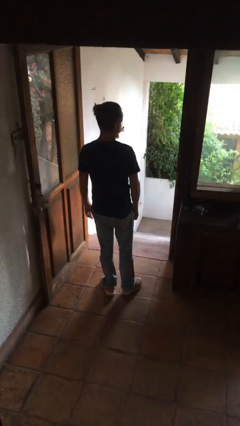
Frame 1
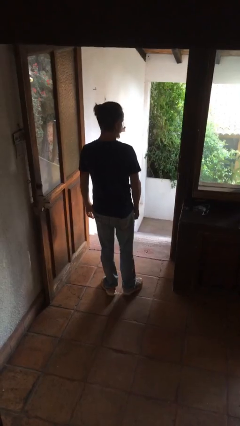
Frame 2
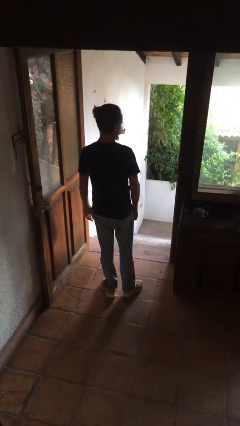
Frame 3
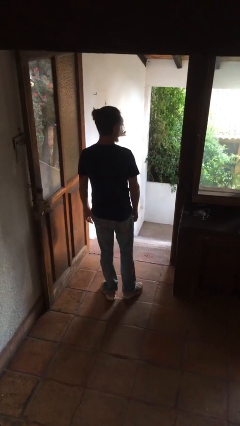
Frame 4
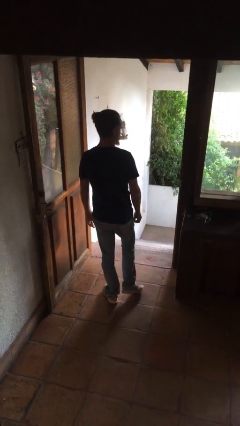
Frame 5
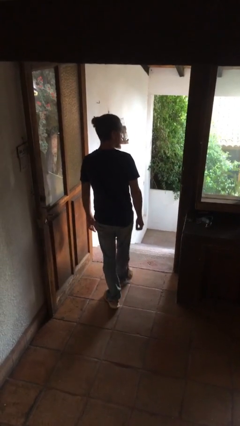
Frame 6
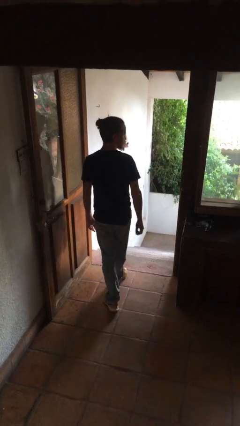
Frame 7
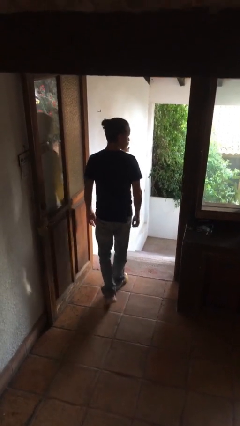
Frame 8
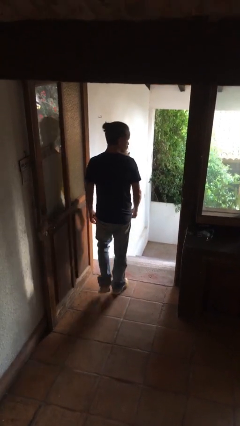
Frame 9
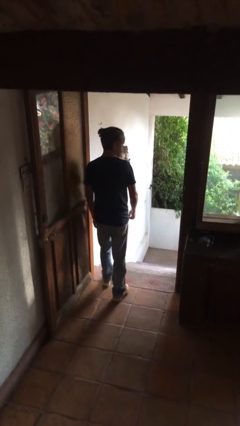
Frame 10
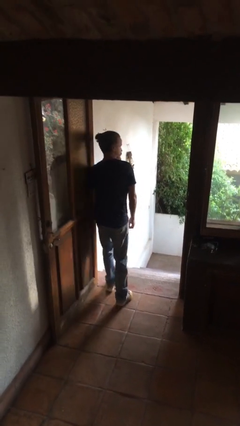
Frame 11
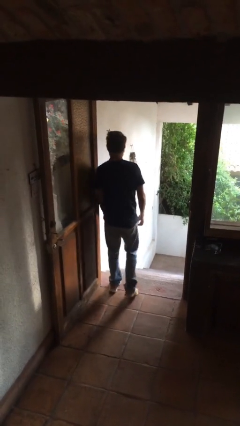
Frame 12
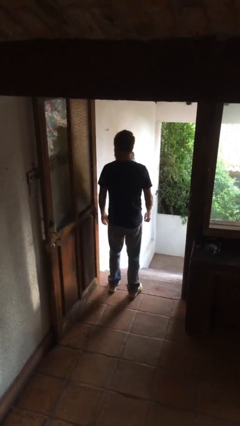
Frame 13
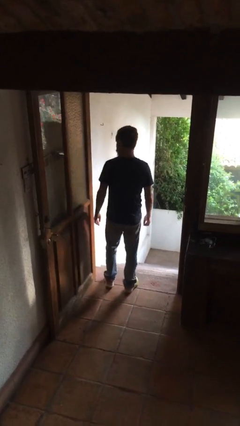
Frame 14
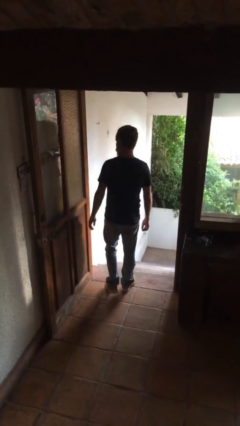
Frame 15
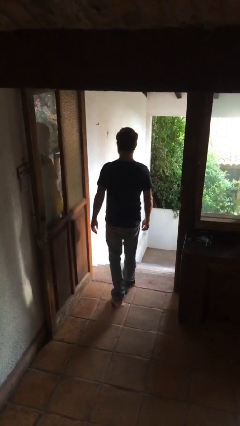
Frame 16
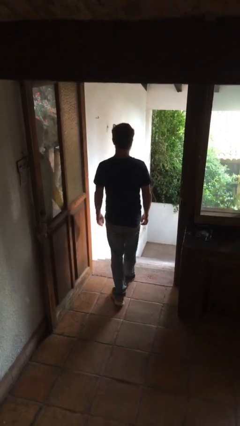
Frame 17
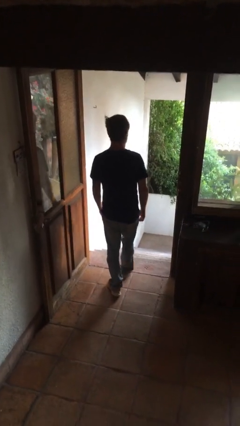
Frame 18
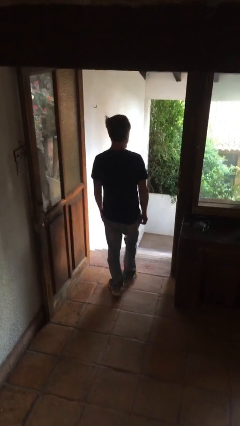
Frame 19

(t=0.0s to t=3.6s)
person bumps into wall

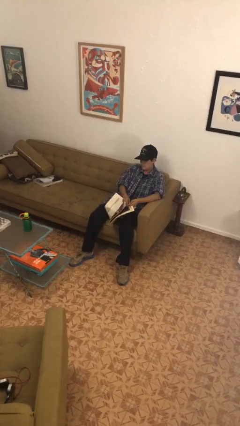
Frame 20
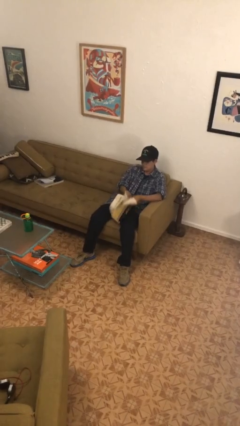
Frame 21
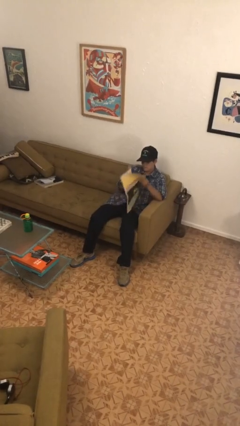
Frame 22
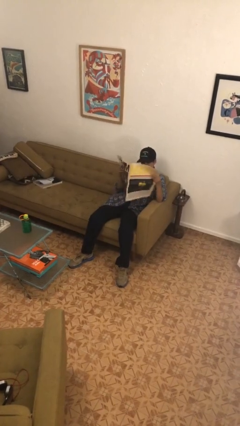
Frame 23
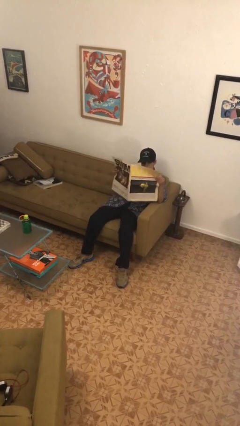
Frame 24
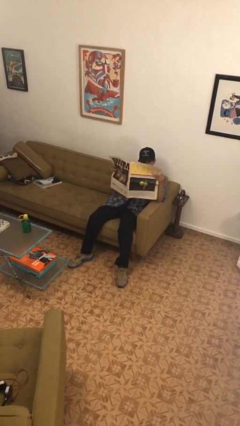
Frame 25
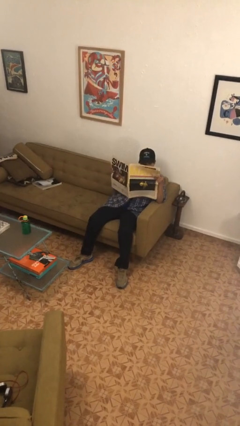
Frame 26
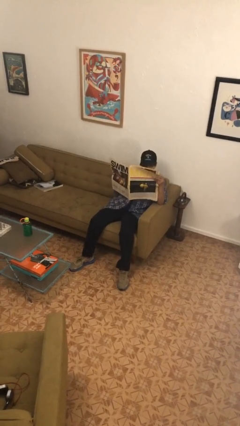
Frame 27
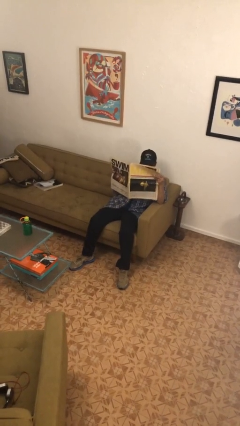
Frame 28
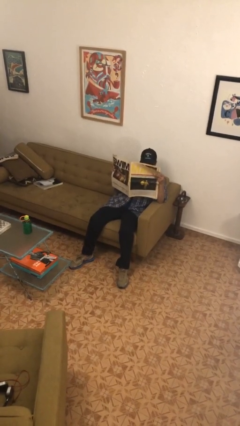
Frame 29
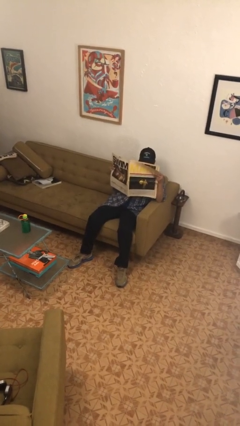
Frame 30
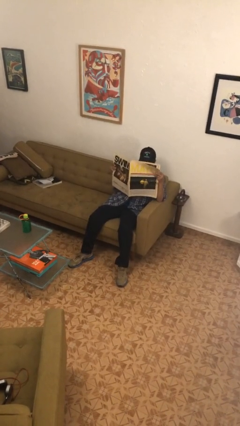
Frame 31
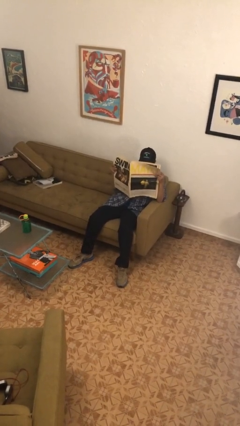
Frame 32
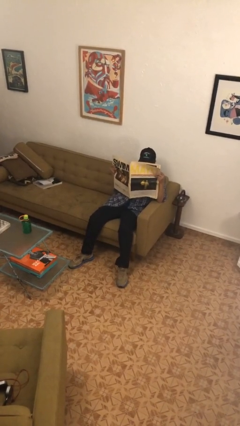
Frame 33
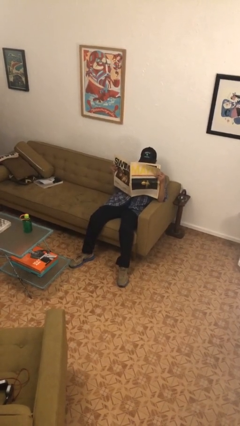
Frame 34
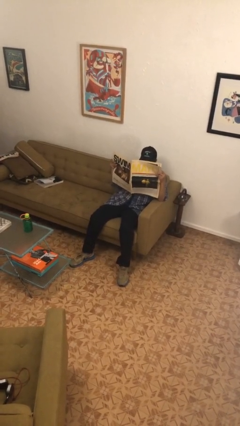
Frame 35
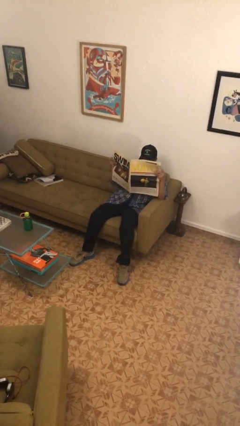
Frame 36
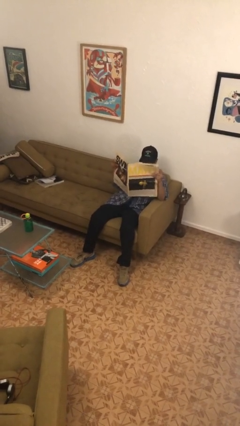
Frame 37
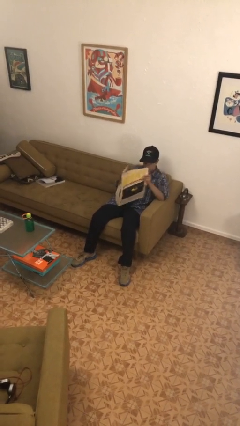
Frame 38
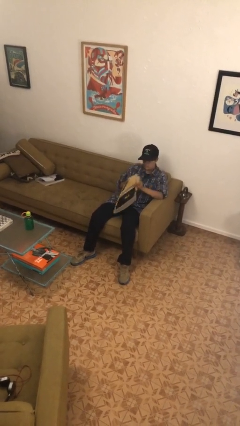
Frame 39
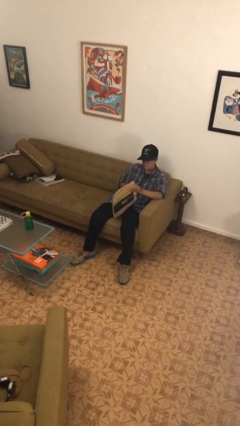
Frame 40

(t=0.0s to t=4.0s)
person reads newspaper

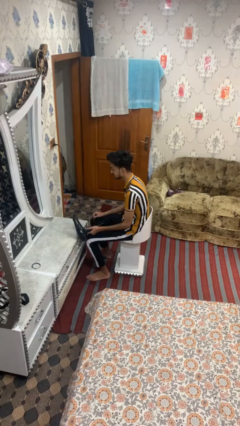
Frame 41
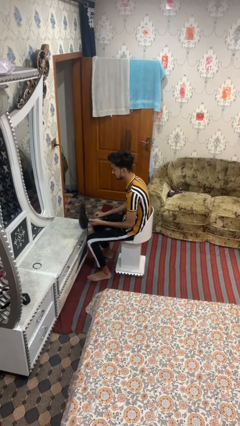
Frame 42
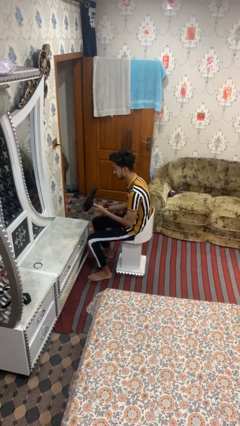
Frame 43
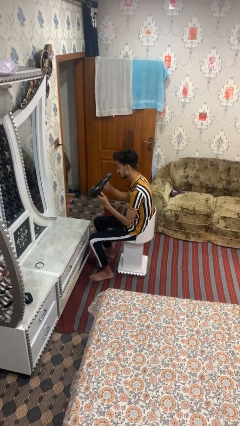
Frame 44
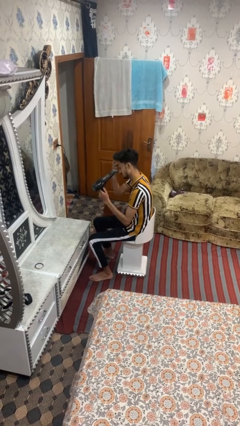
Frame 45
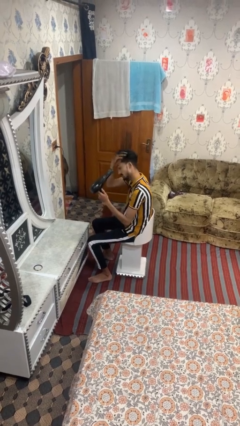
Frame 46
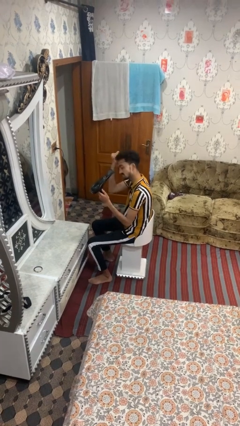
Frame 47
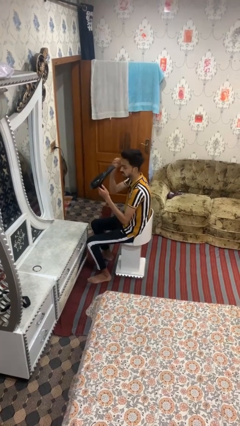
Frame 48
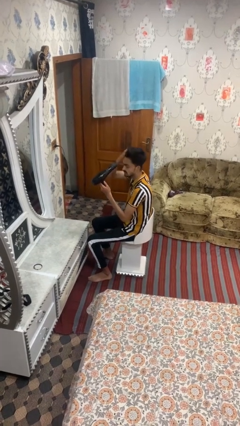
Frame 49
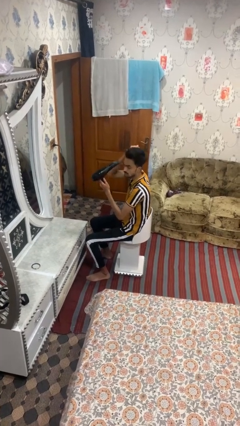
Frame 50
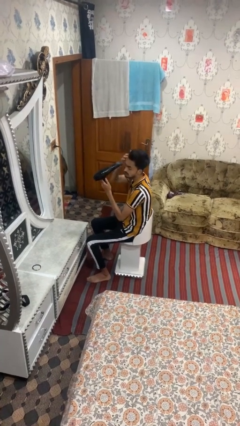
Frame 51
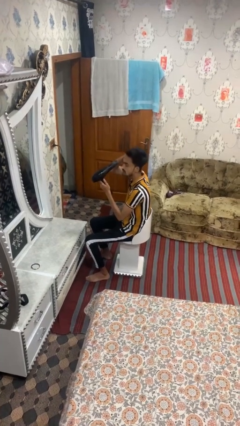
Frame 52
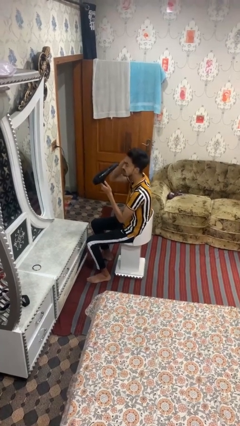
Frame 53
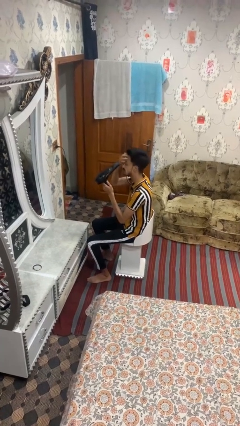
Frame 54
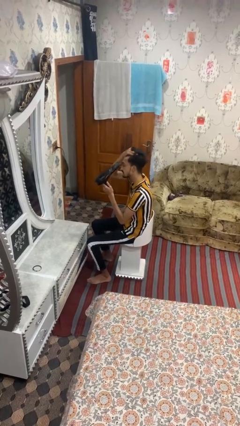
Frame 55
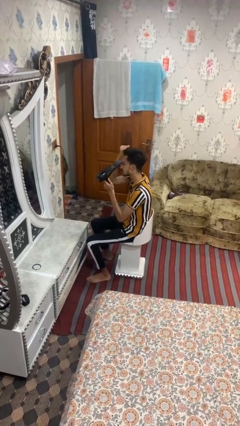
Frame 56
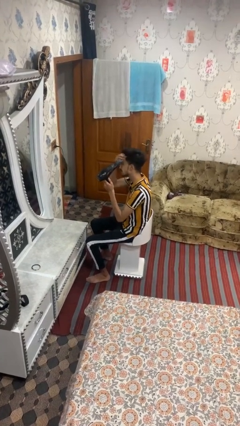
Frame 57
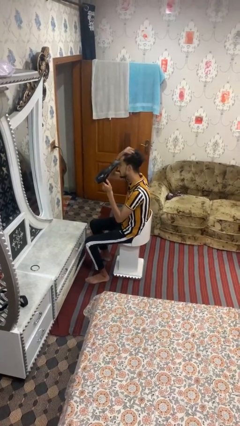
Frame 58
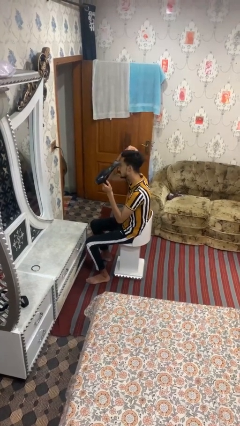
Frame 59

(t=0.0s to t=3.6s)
person dries hair with hairdryer

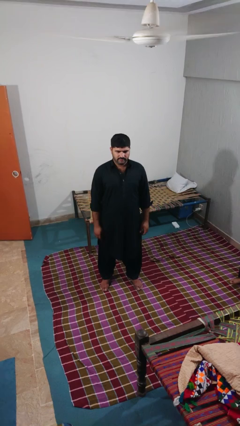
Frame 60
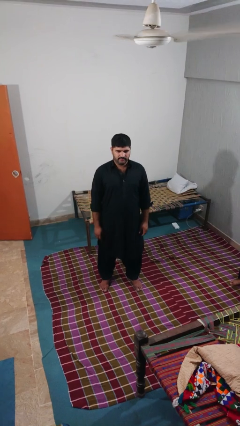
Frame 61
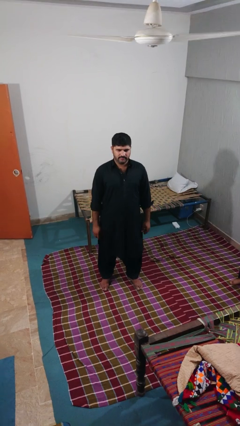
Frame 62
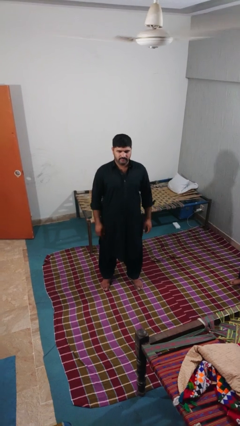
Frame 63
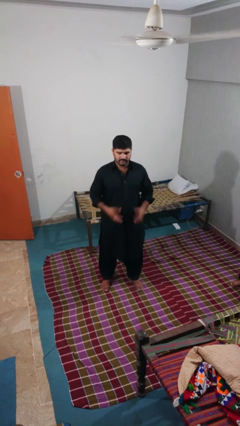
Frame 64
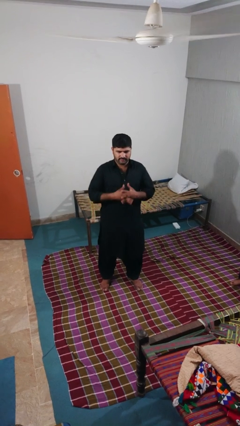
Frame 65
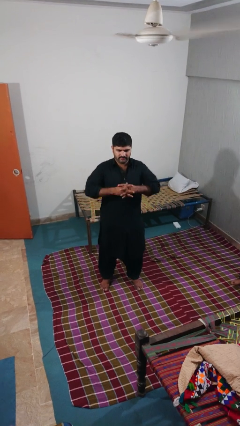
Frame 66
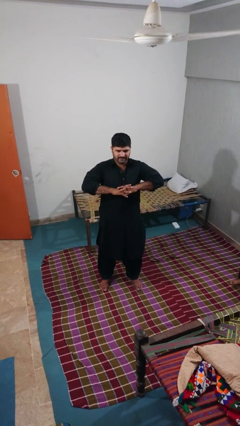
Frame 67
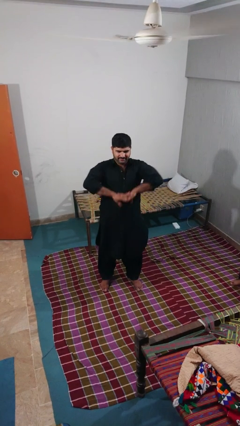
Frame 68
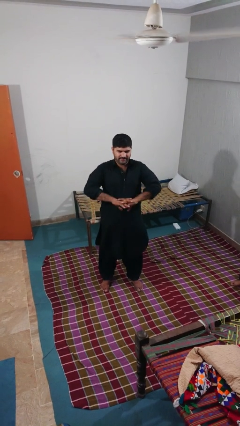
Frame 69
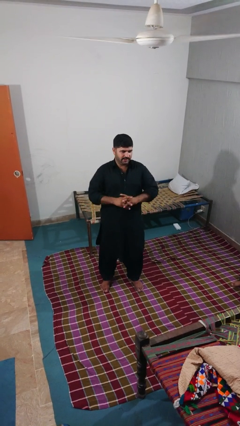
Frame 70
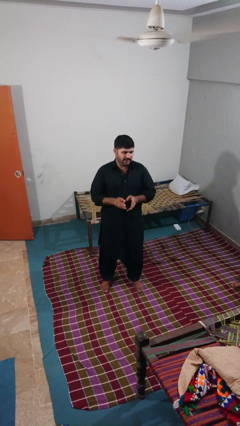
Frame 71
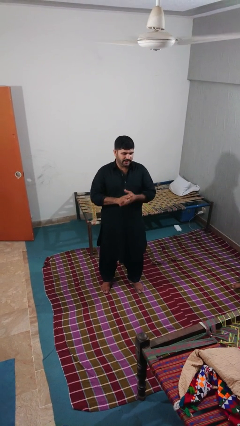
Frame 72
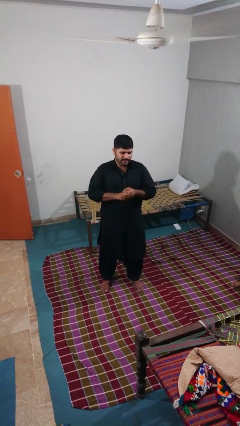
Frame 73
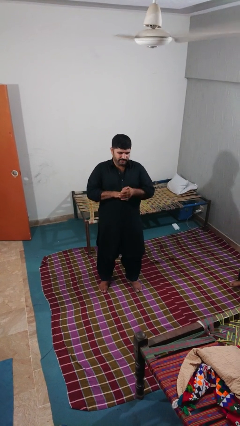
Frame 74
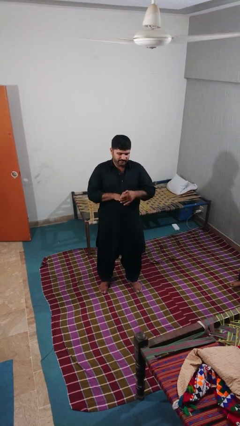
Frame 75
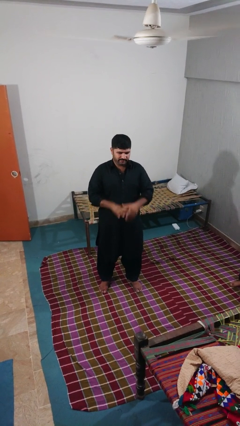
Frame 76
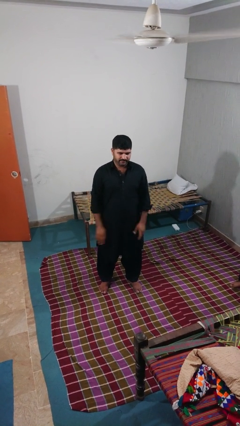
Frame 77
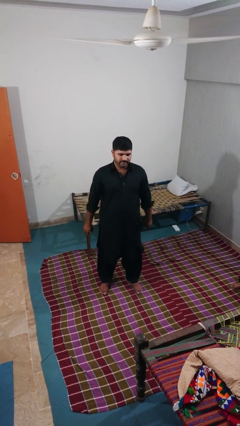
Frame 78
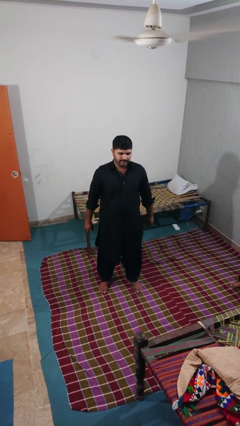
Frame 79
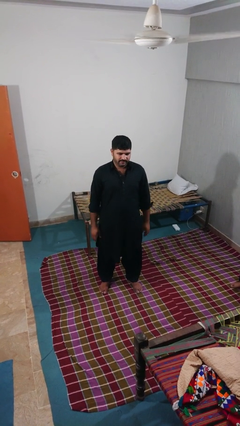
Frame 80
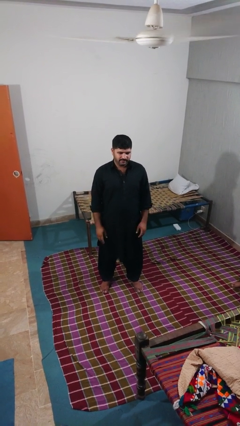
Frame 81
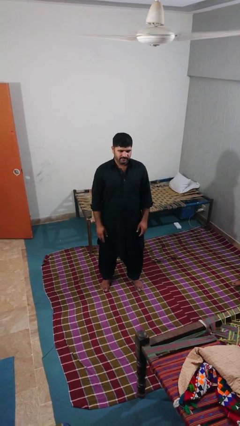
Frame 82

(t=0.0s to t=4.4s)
person cracks knuckles

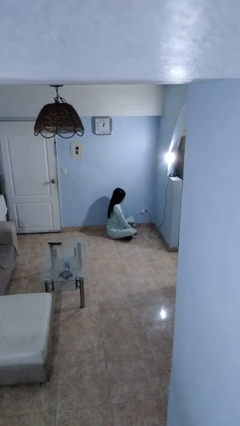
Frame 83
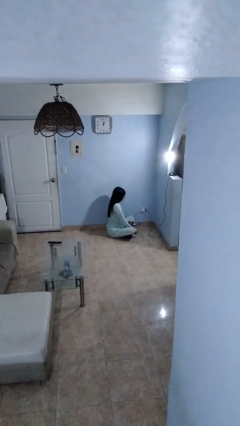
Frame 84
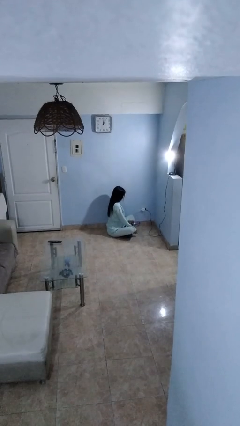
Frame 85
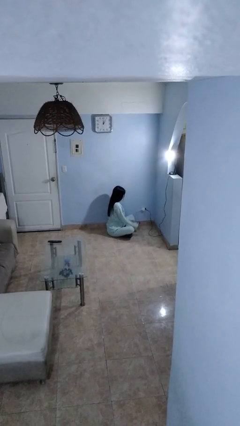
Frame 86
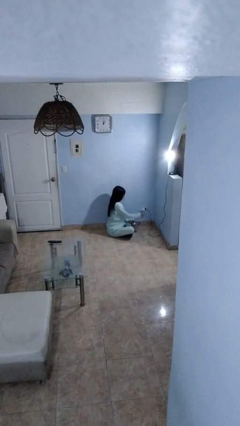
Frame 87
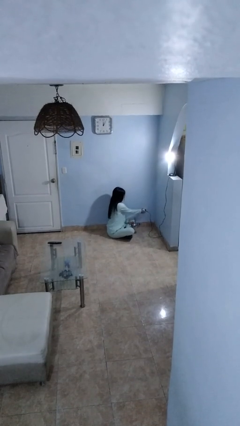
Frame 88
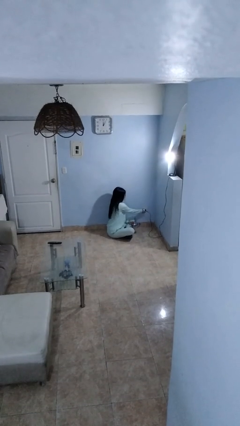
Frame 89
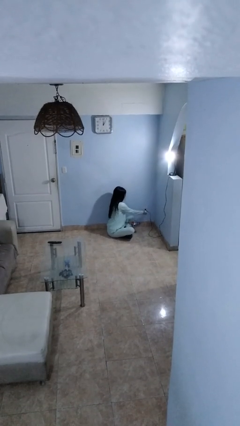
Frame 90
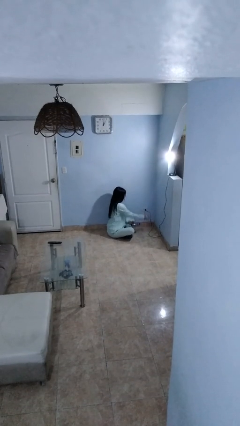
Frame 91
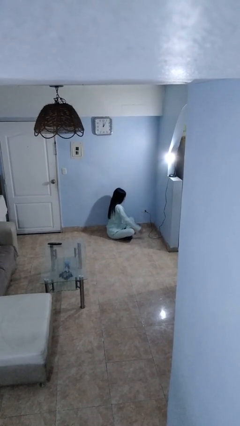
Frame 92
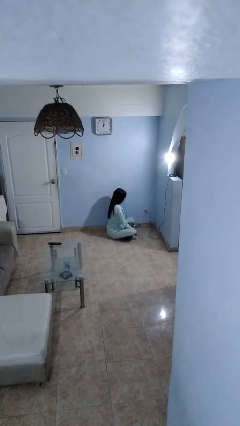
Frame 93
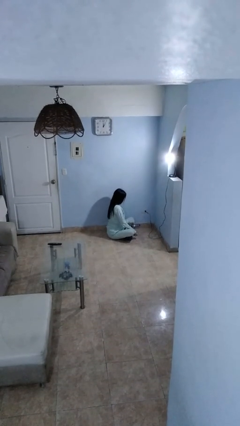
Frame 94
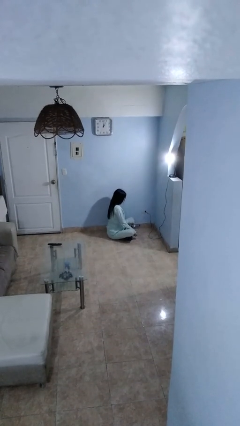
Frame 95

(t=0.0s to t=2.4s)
person unplugs from electrical socket
